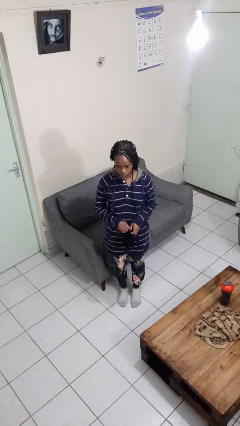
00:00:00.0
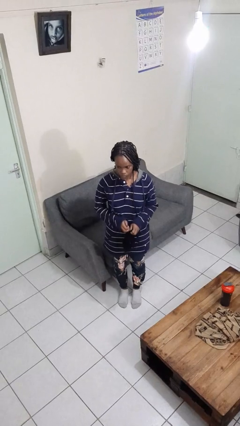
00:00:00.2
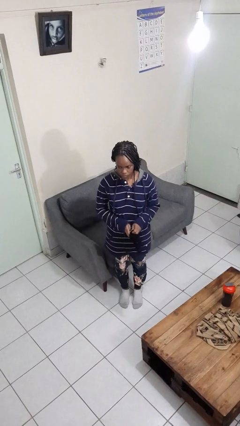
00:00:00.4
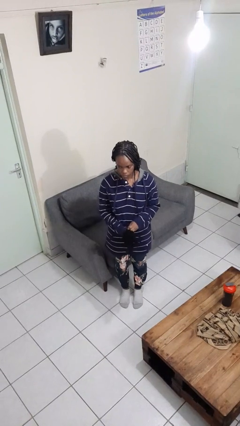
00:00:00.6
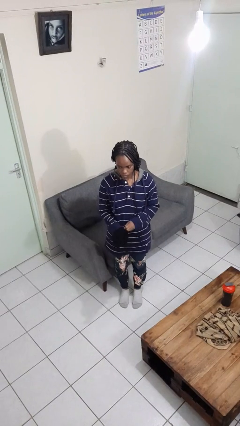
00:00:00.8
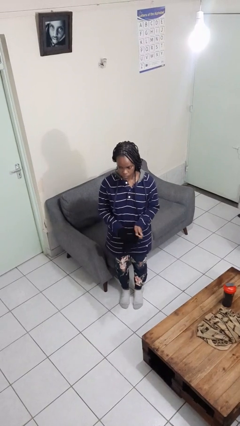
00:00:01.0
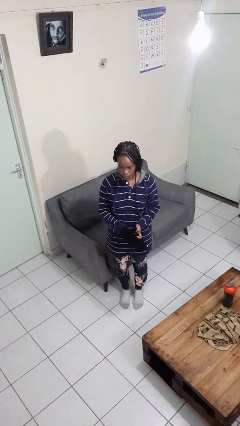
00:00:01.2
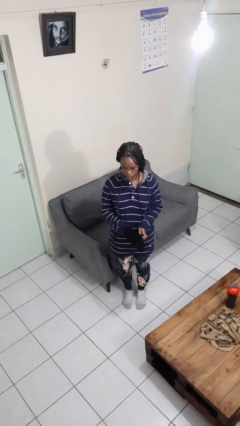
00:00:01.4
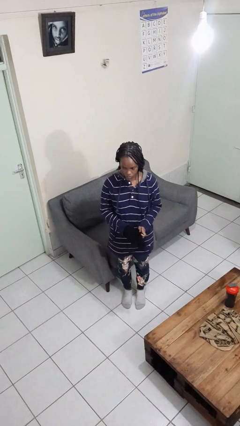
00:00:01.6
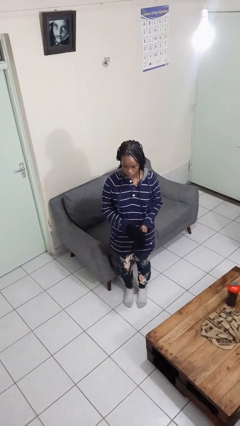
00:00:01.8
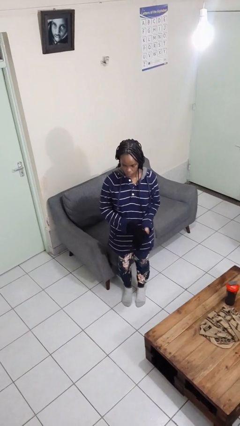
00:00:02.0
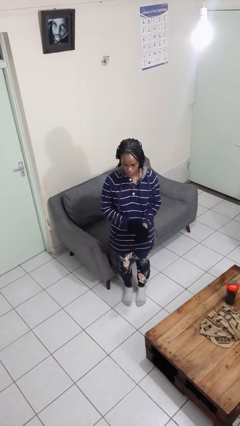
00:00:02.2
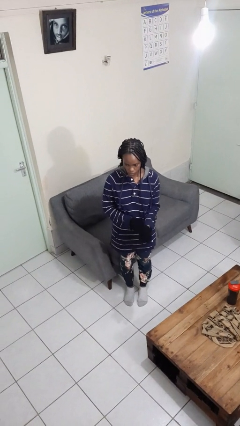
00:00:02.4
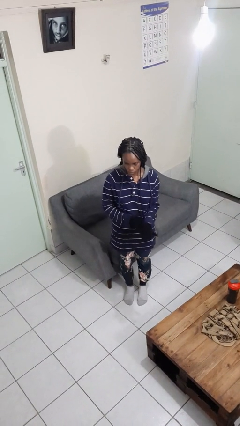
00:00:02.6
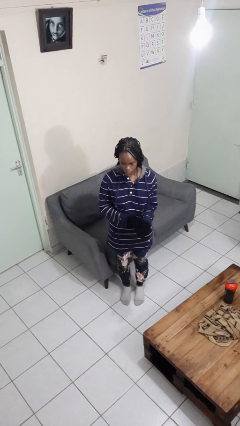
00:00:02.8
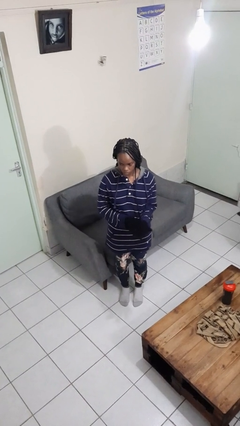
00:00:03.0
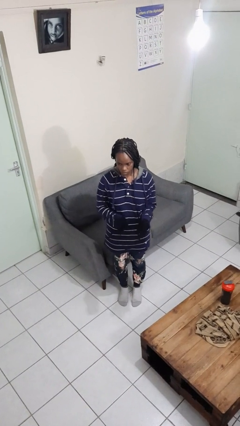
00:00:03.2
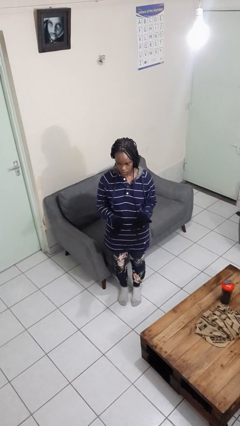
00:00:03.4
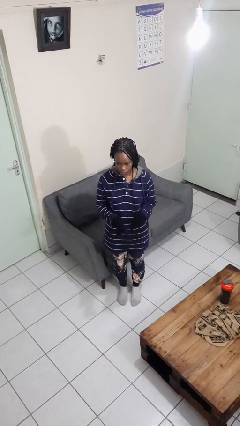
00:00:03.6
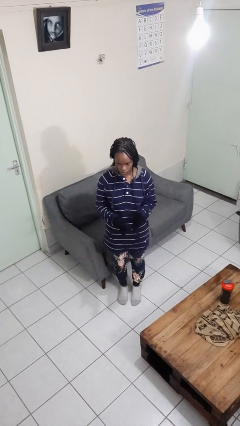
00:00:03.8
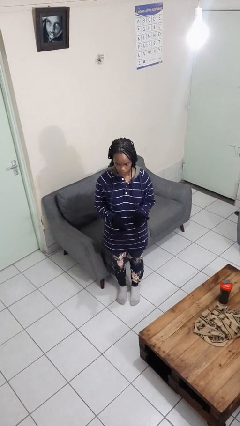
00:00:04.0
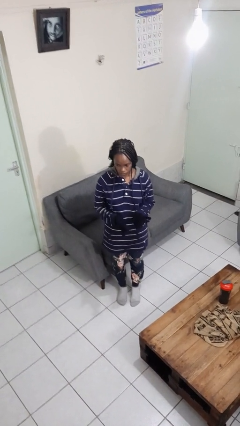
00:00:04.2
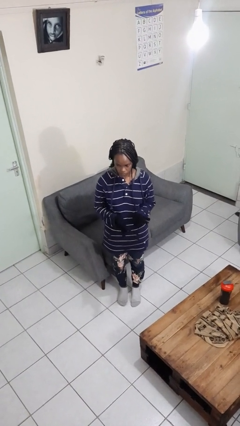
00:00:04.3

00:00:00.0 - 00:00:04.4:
person puts on gloves

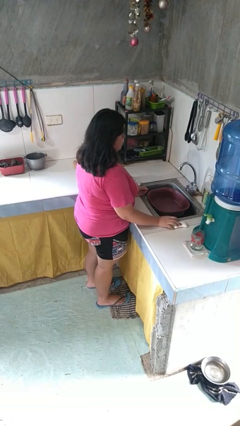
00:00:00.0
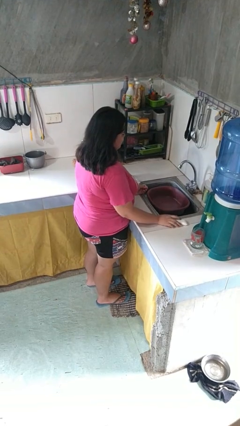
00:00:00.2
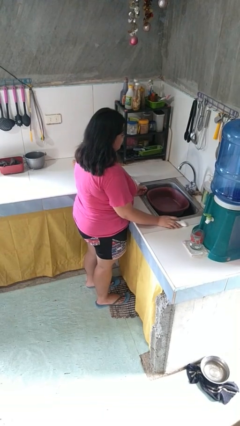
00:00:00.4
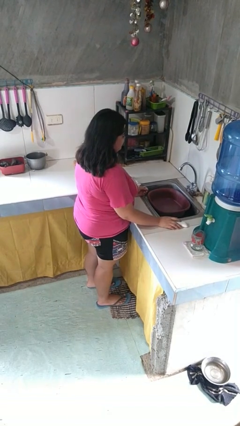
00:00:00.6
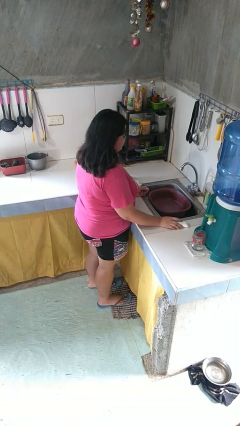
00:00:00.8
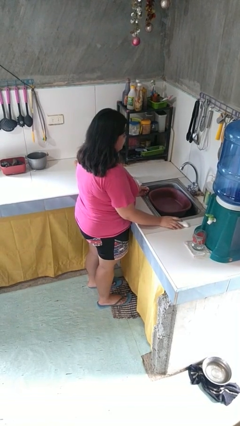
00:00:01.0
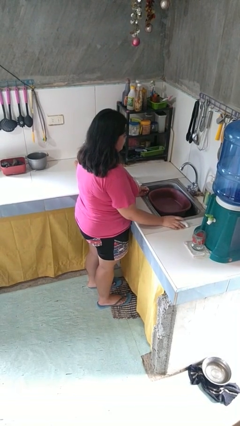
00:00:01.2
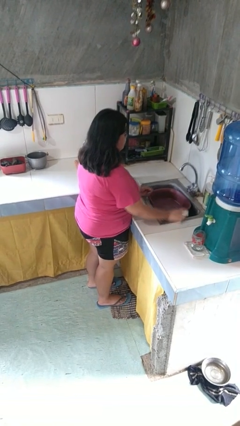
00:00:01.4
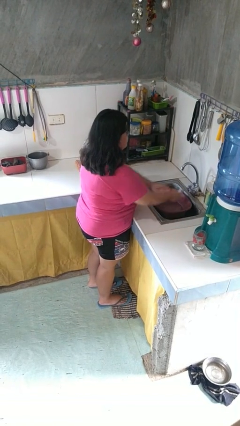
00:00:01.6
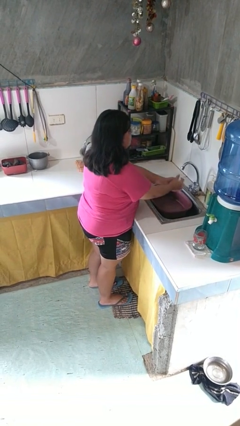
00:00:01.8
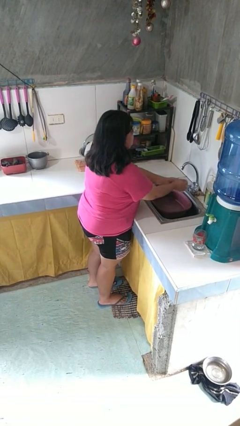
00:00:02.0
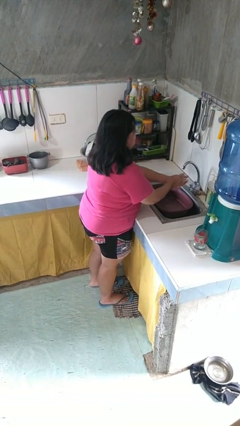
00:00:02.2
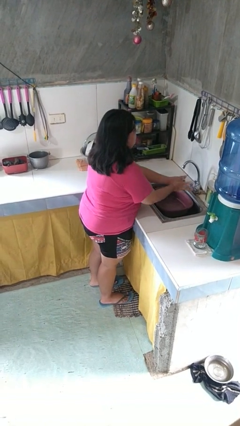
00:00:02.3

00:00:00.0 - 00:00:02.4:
person washes hands

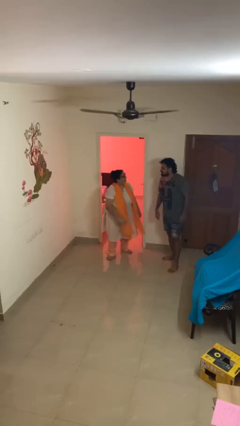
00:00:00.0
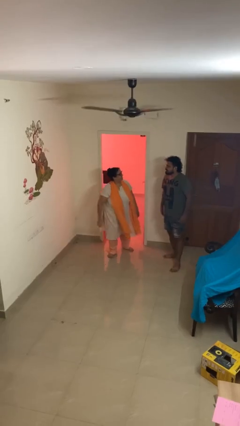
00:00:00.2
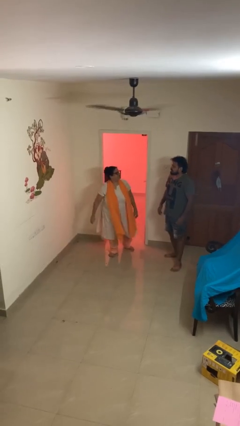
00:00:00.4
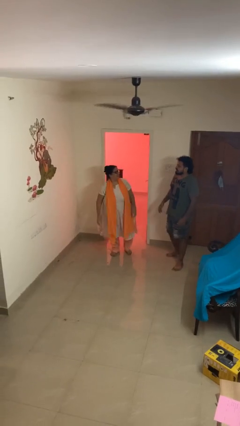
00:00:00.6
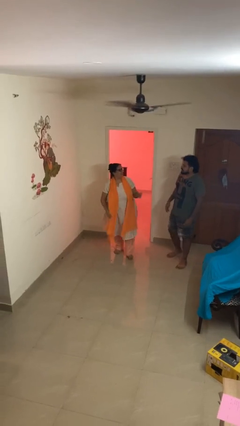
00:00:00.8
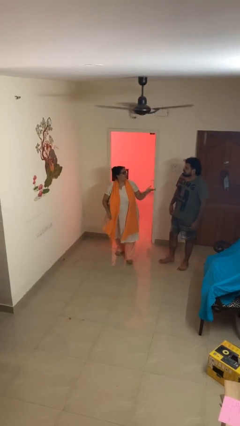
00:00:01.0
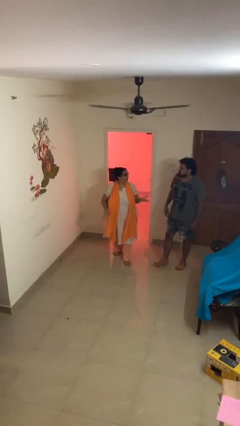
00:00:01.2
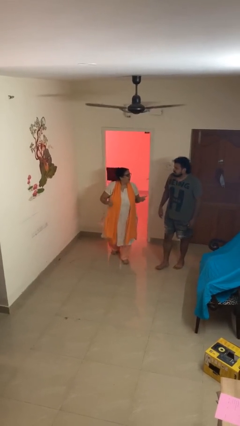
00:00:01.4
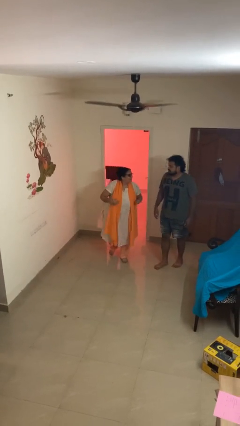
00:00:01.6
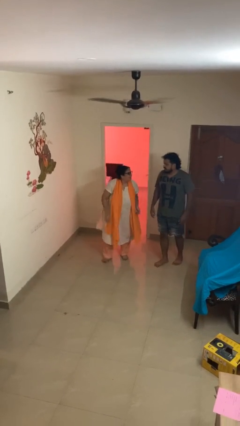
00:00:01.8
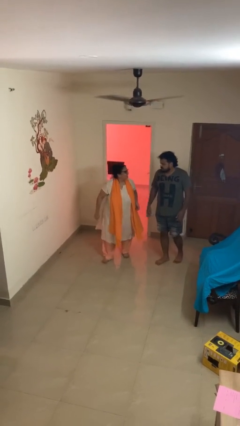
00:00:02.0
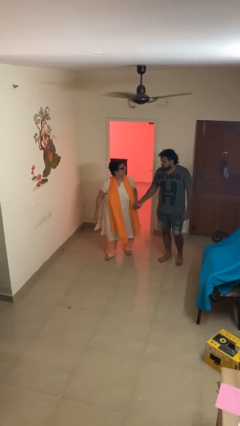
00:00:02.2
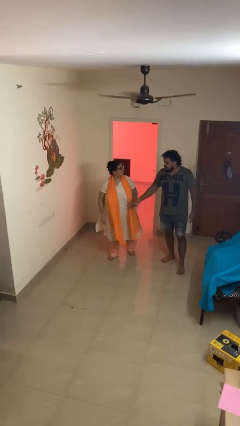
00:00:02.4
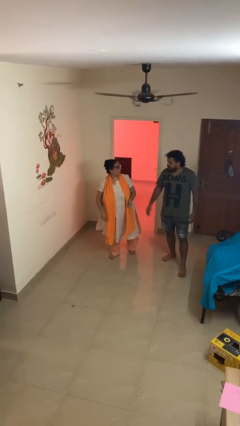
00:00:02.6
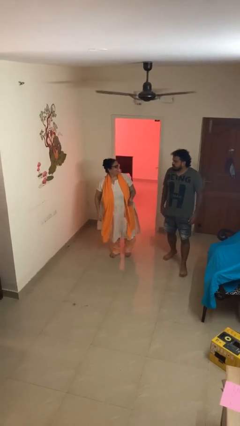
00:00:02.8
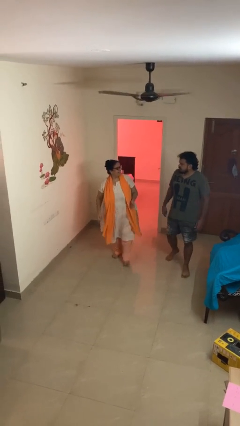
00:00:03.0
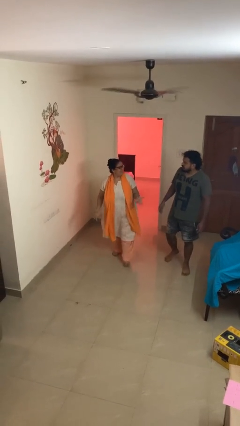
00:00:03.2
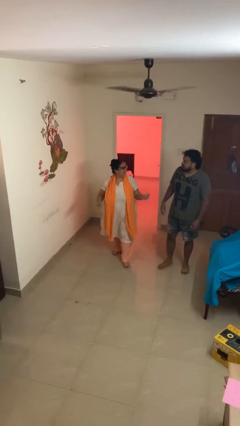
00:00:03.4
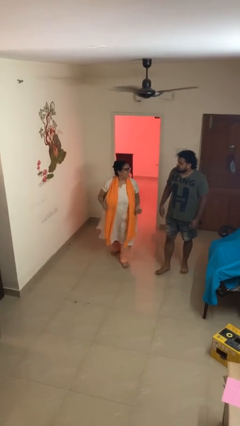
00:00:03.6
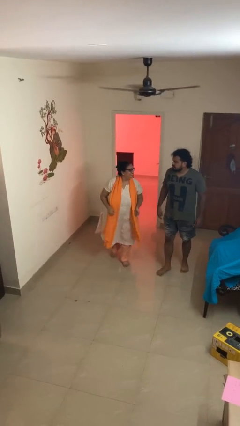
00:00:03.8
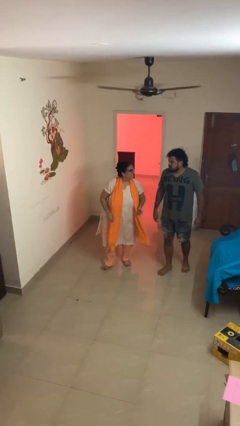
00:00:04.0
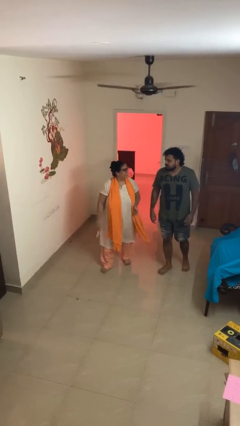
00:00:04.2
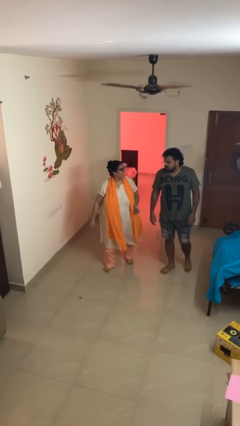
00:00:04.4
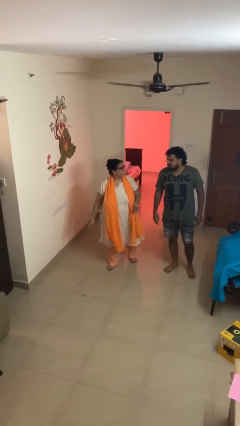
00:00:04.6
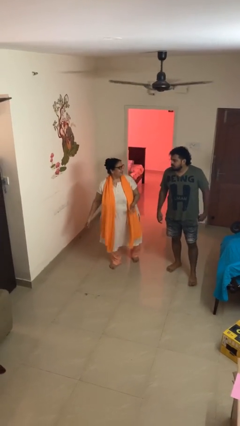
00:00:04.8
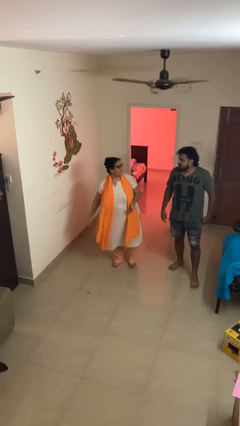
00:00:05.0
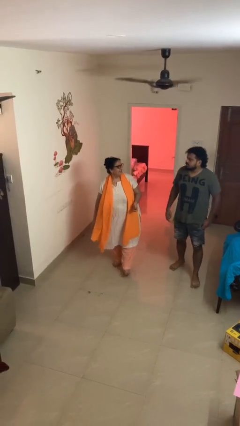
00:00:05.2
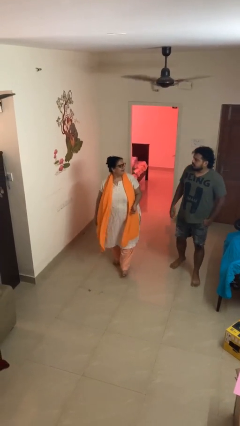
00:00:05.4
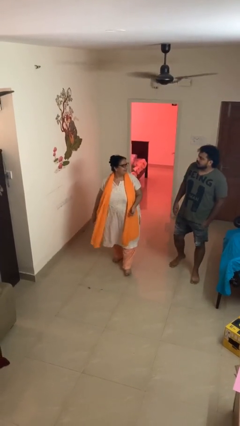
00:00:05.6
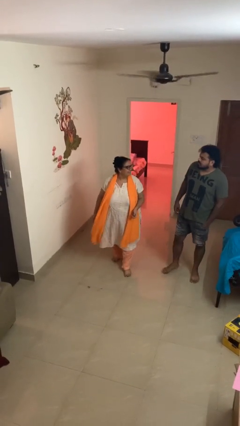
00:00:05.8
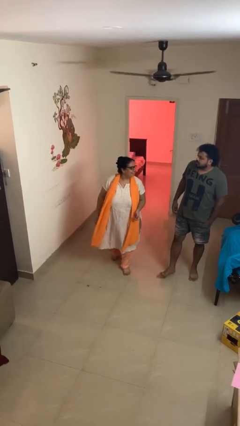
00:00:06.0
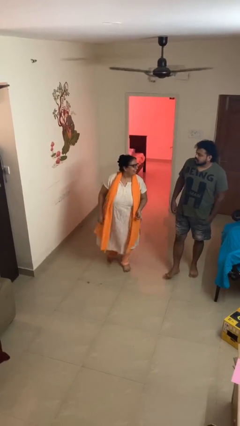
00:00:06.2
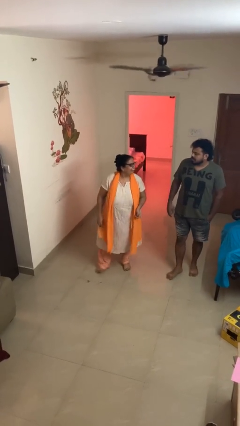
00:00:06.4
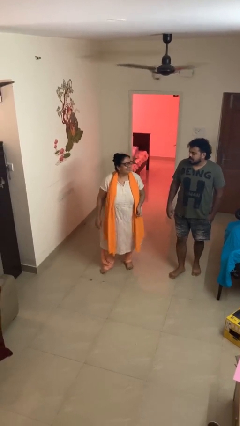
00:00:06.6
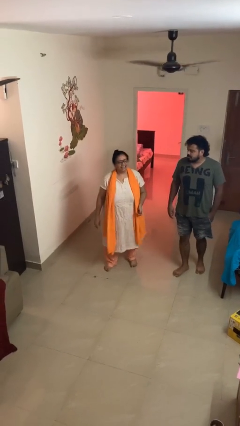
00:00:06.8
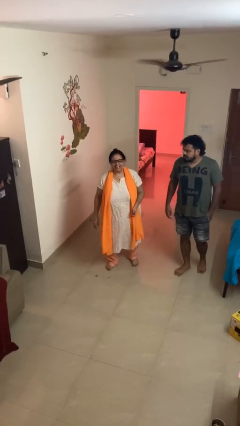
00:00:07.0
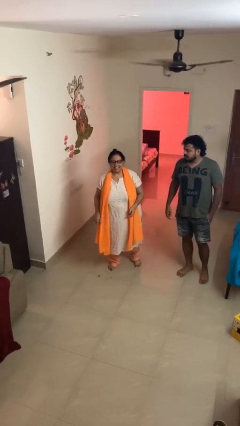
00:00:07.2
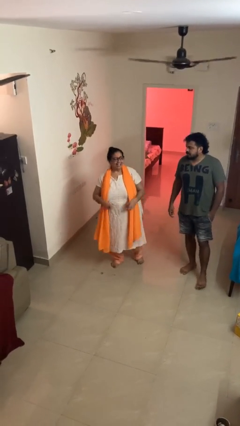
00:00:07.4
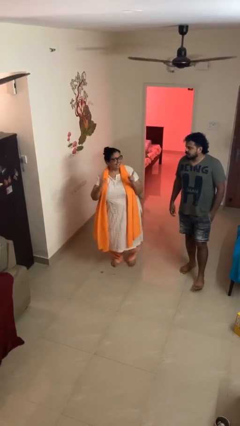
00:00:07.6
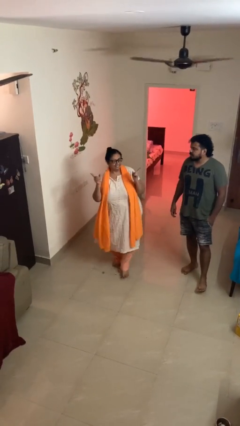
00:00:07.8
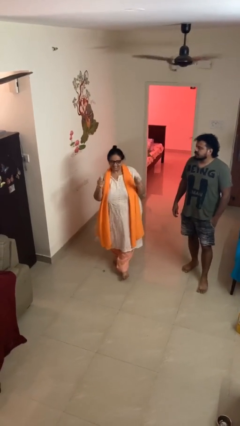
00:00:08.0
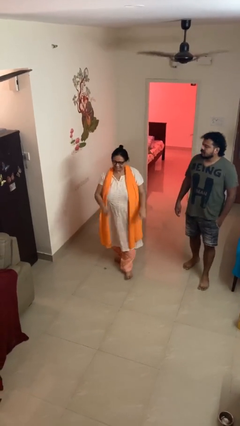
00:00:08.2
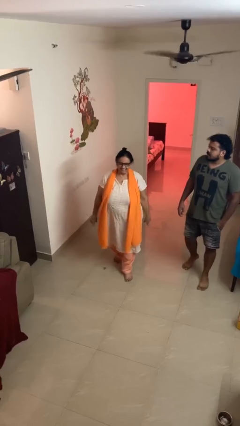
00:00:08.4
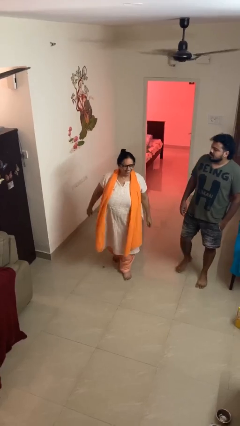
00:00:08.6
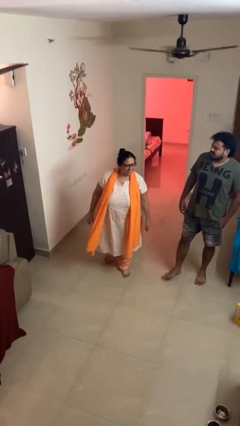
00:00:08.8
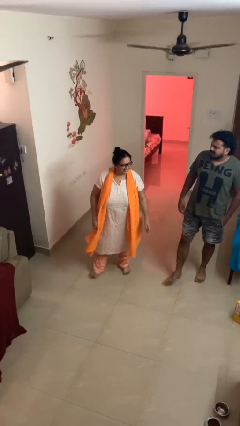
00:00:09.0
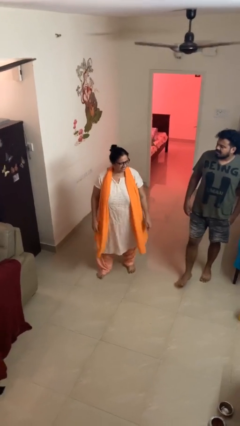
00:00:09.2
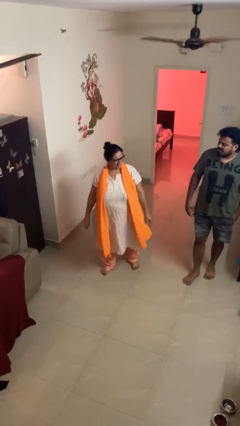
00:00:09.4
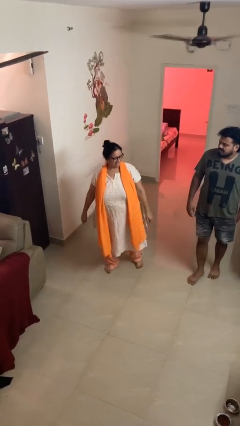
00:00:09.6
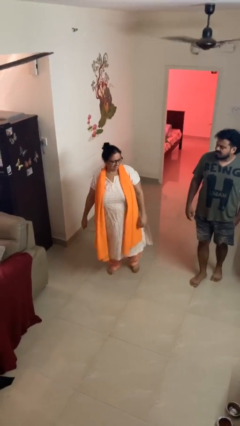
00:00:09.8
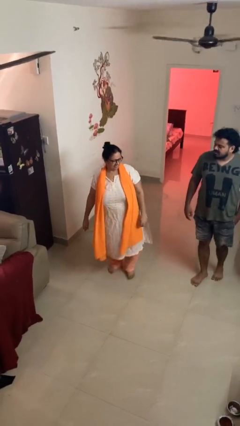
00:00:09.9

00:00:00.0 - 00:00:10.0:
person talks to person

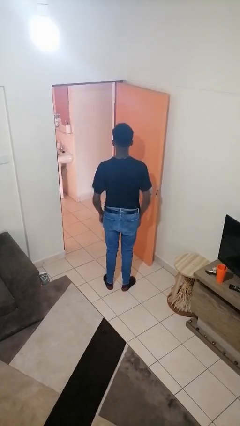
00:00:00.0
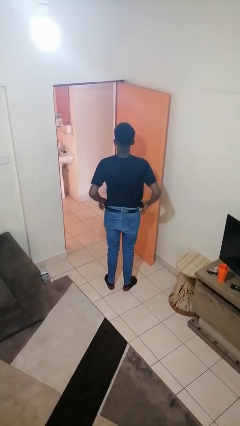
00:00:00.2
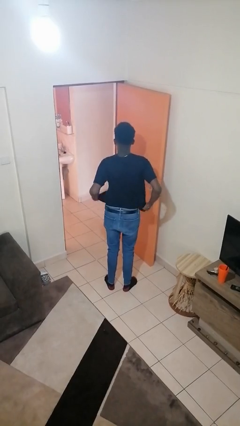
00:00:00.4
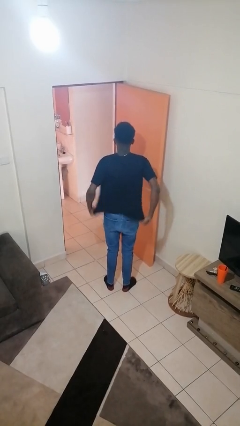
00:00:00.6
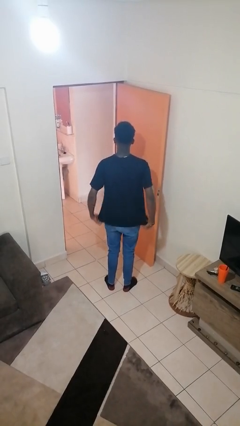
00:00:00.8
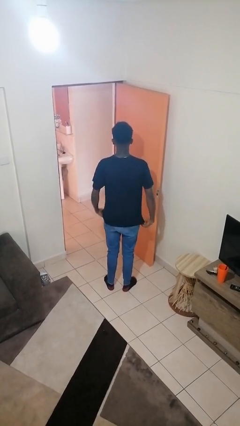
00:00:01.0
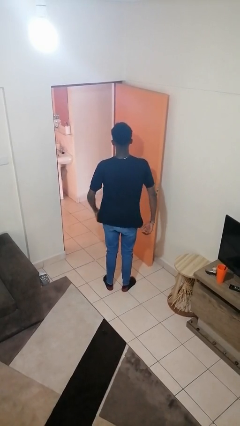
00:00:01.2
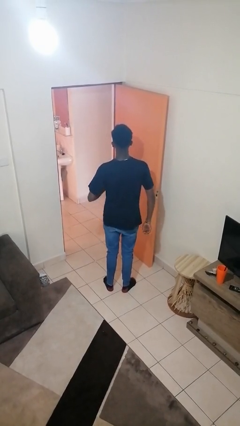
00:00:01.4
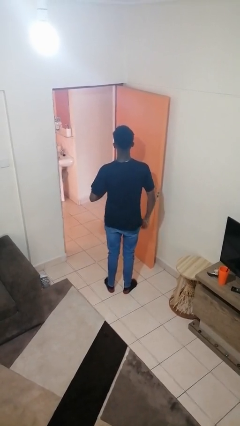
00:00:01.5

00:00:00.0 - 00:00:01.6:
person untucks shirt
